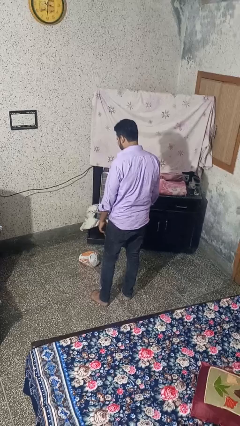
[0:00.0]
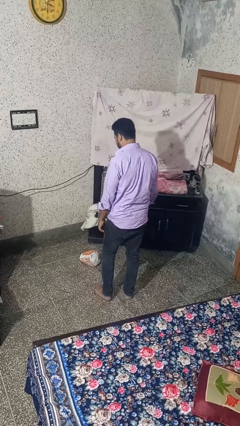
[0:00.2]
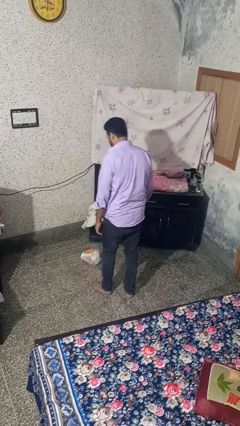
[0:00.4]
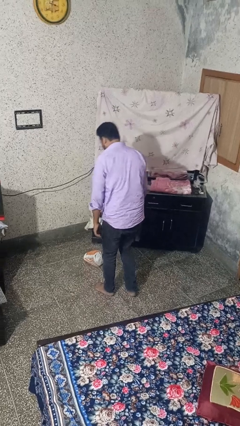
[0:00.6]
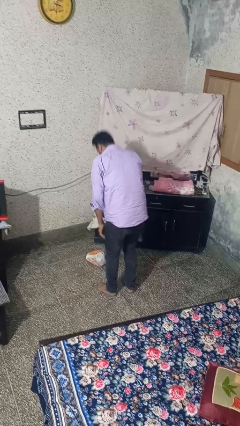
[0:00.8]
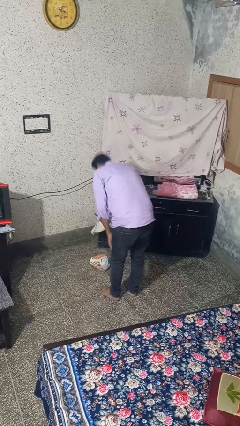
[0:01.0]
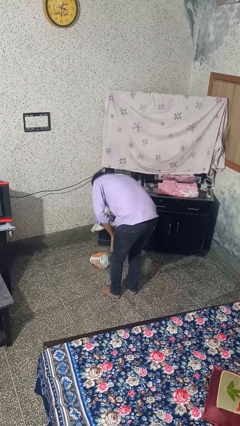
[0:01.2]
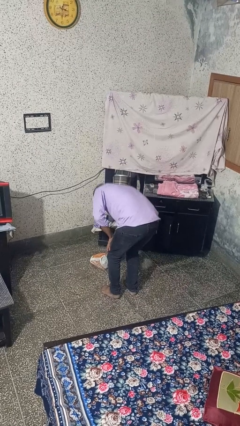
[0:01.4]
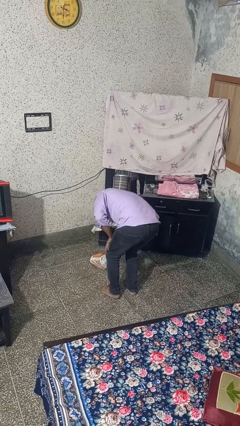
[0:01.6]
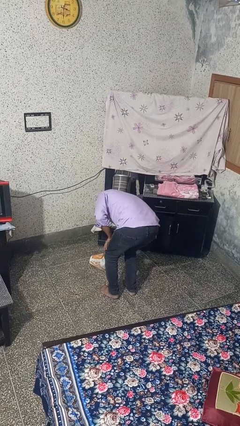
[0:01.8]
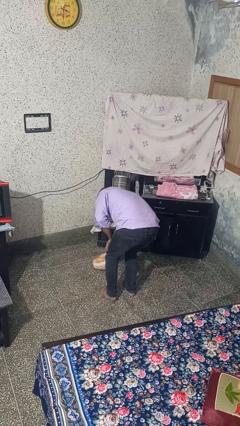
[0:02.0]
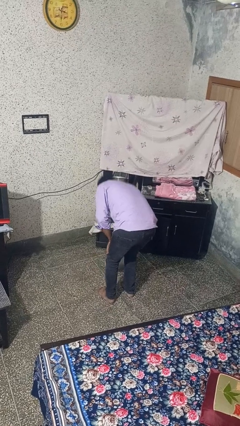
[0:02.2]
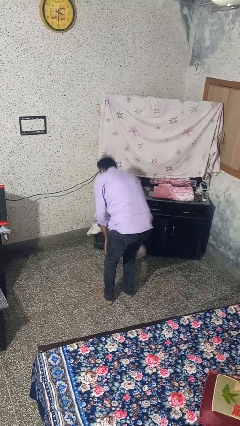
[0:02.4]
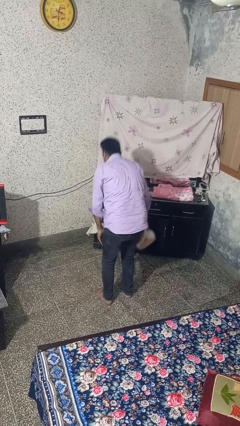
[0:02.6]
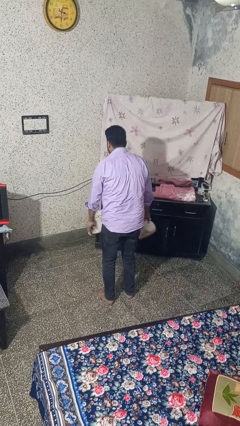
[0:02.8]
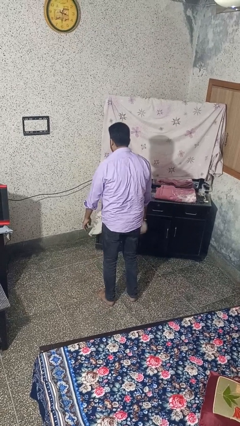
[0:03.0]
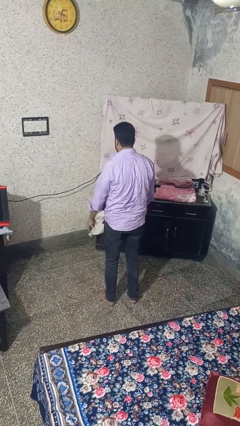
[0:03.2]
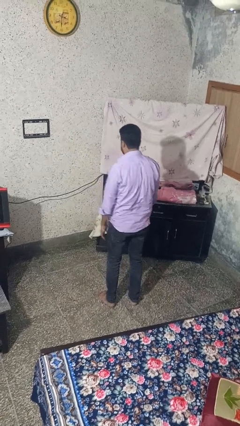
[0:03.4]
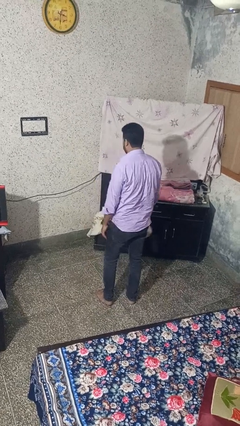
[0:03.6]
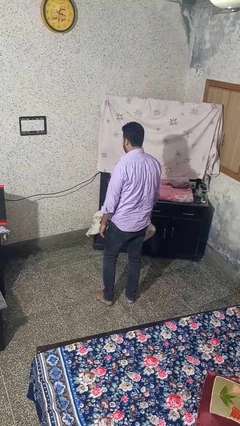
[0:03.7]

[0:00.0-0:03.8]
person picks up object from floor

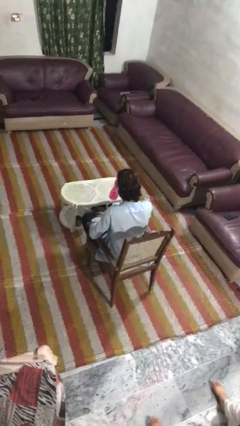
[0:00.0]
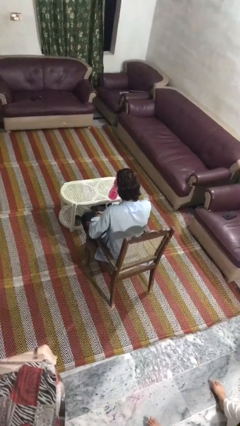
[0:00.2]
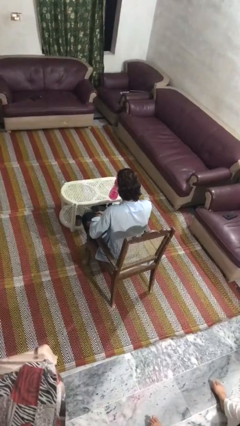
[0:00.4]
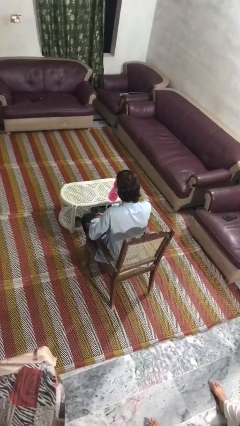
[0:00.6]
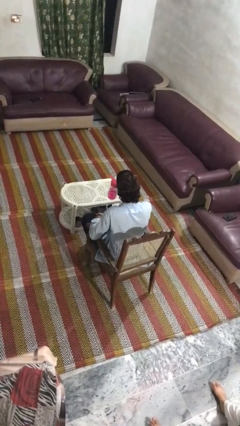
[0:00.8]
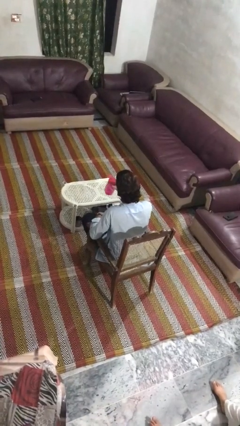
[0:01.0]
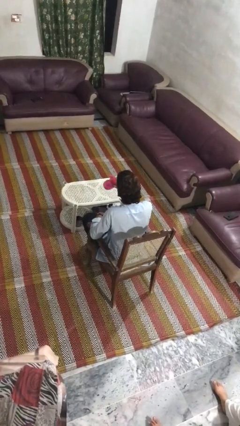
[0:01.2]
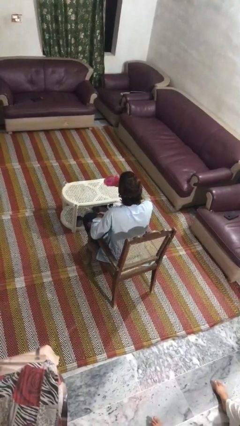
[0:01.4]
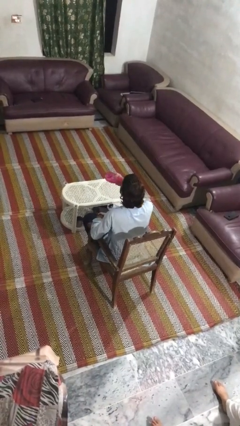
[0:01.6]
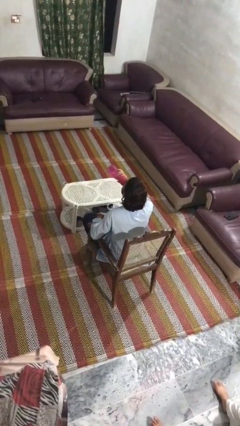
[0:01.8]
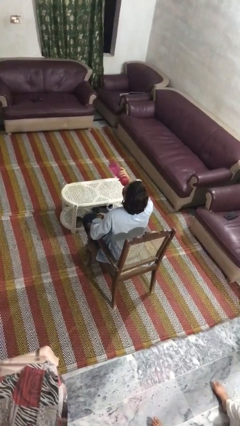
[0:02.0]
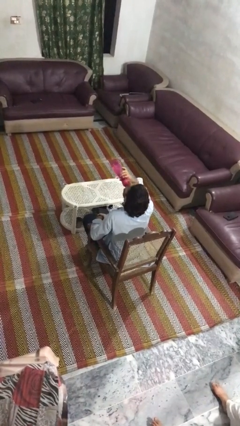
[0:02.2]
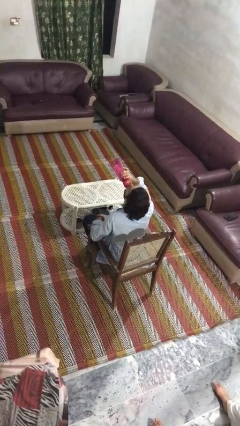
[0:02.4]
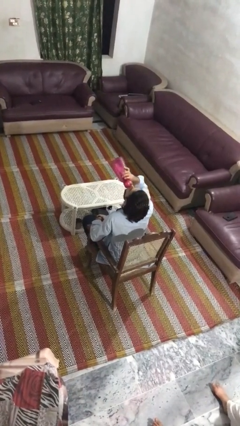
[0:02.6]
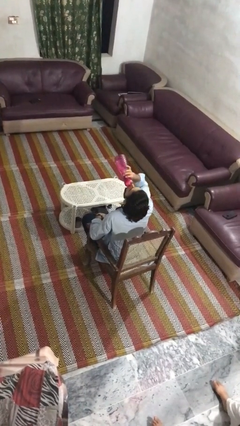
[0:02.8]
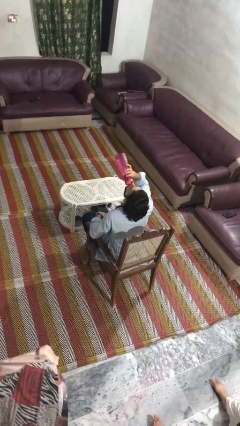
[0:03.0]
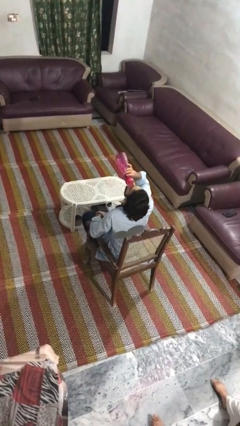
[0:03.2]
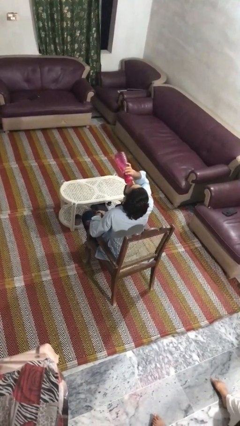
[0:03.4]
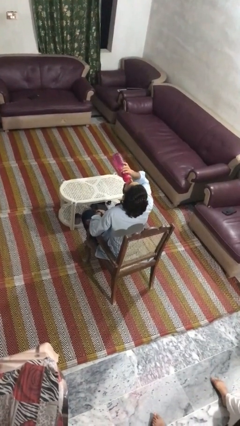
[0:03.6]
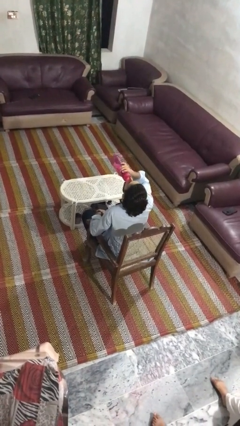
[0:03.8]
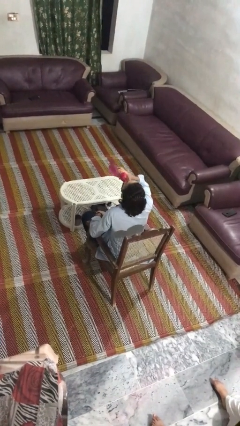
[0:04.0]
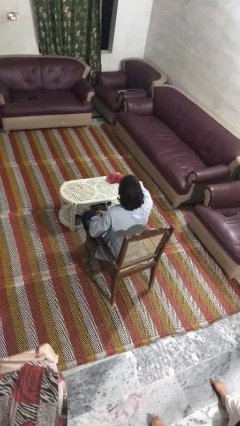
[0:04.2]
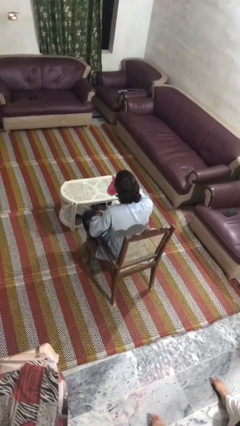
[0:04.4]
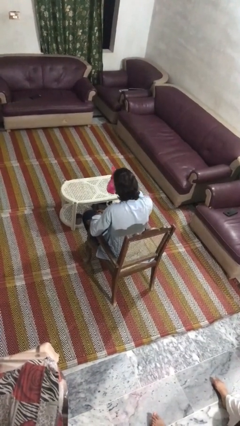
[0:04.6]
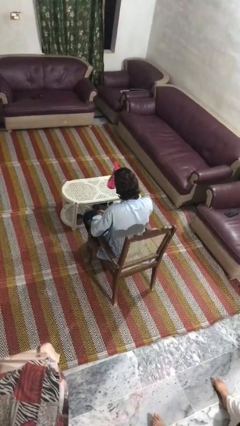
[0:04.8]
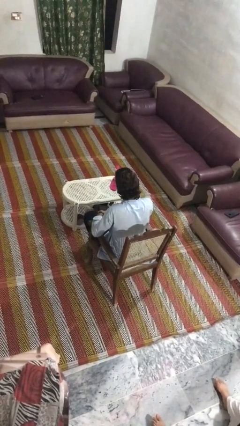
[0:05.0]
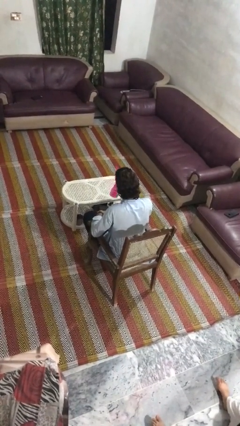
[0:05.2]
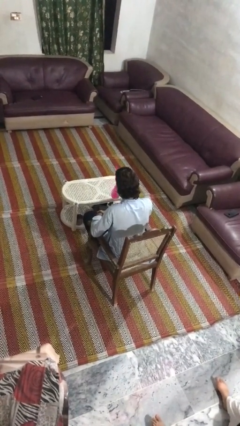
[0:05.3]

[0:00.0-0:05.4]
person drinks from bottle

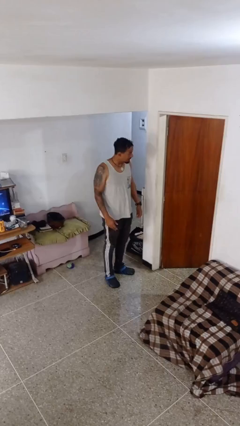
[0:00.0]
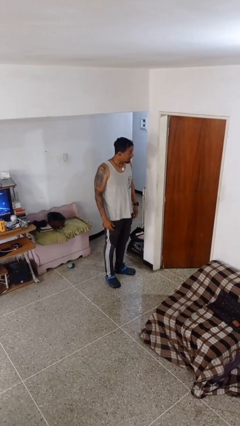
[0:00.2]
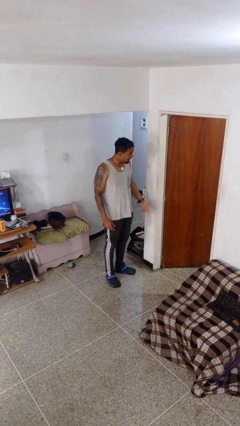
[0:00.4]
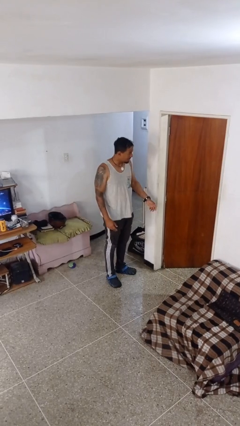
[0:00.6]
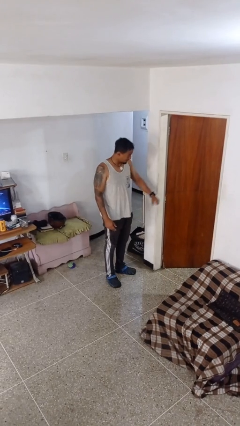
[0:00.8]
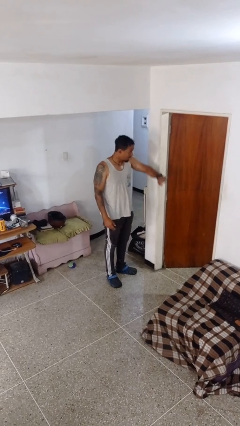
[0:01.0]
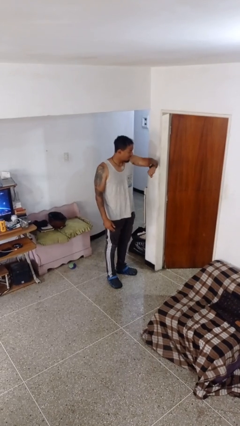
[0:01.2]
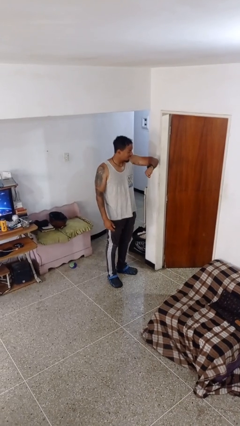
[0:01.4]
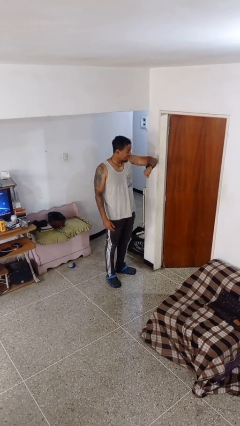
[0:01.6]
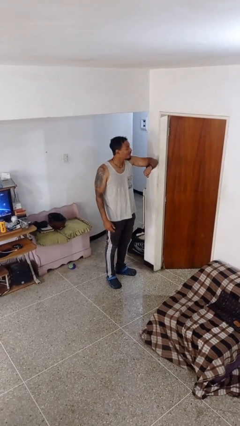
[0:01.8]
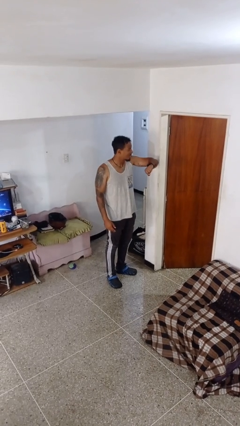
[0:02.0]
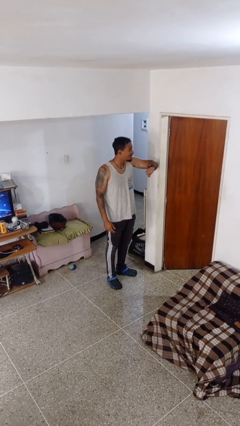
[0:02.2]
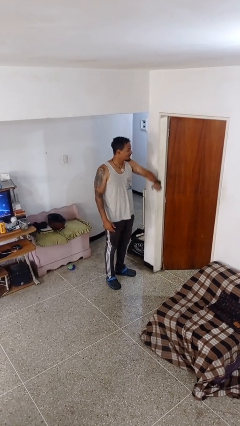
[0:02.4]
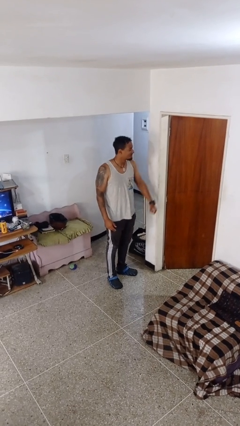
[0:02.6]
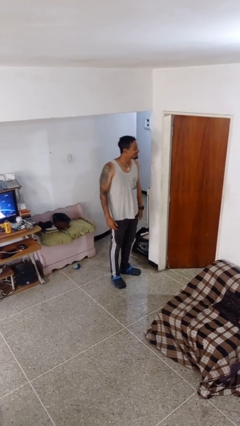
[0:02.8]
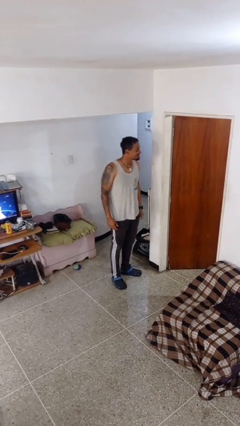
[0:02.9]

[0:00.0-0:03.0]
person looks at wristwatch

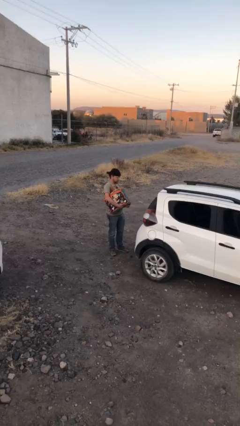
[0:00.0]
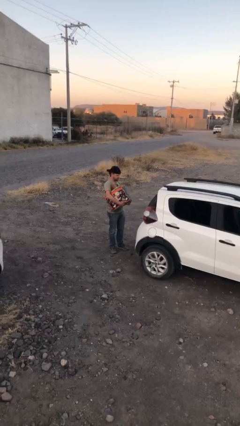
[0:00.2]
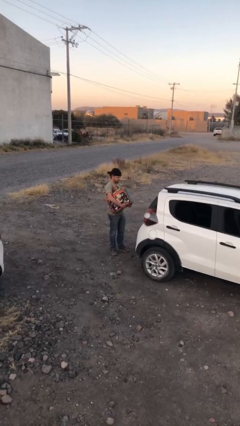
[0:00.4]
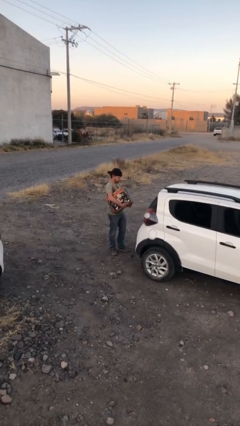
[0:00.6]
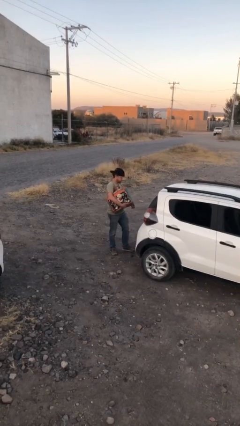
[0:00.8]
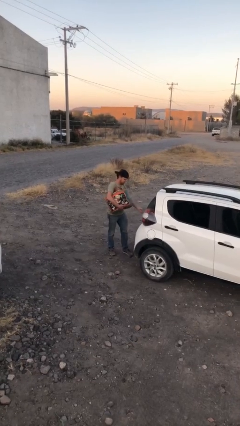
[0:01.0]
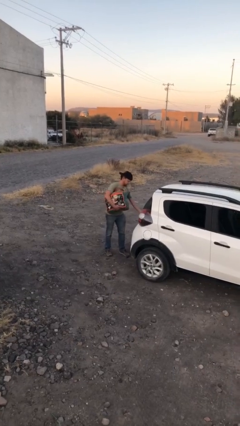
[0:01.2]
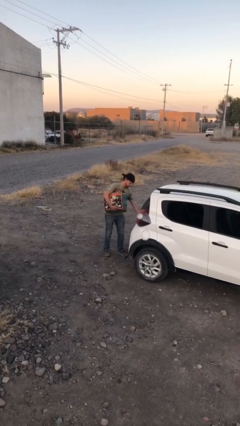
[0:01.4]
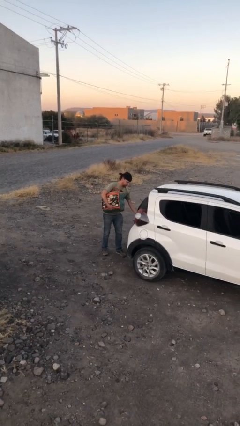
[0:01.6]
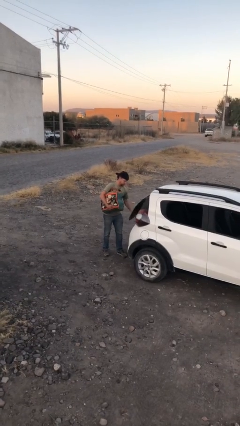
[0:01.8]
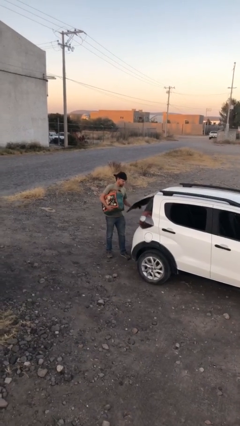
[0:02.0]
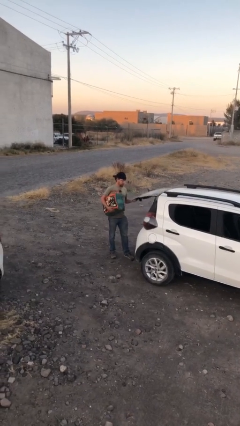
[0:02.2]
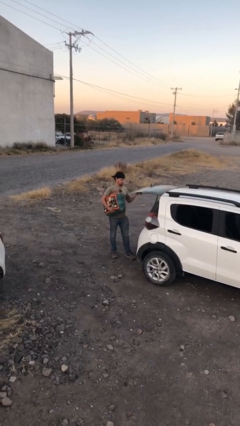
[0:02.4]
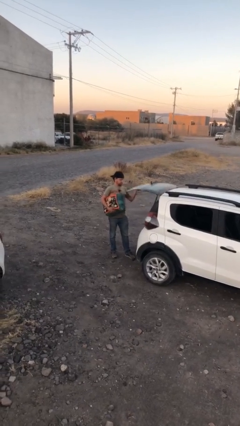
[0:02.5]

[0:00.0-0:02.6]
person opens car trunk

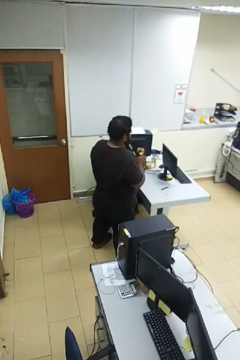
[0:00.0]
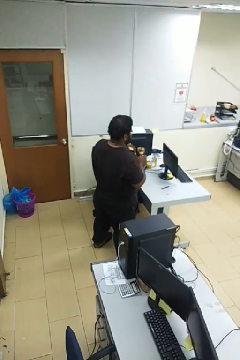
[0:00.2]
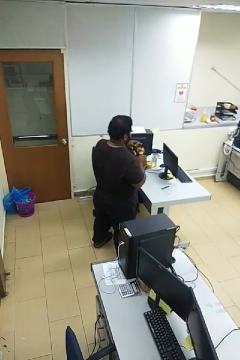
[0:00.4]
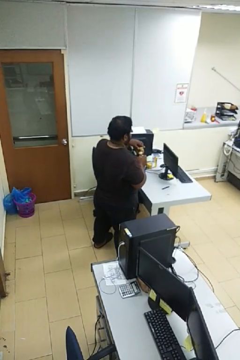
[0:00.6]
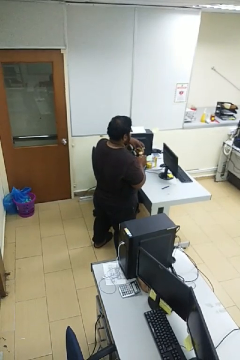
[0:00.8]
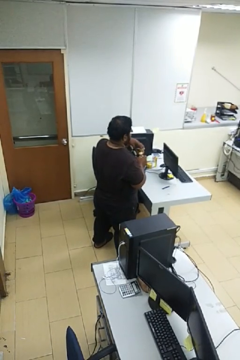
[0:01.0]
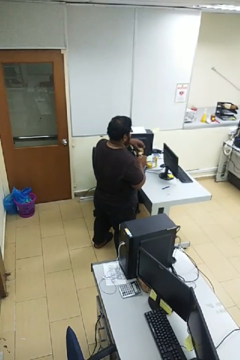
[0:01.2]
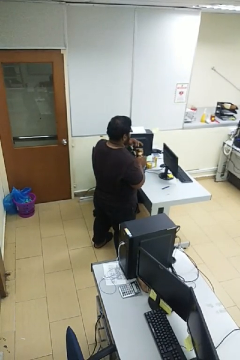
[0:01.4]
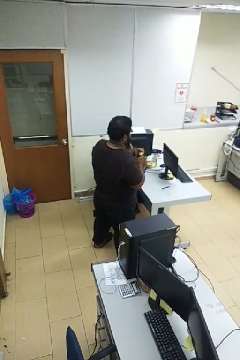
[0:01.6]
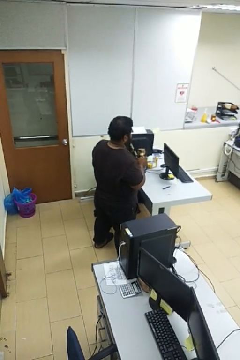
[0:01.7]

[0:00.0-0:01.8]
person closes jar

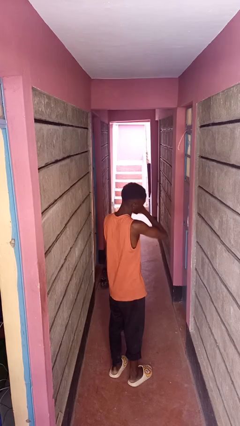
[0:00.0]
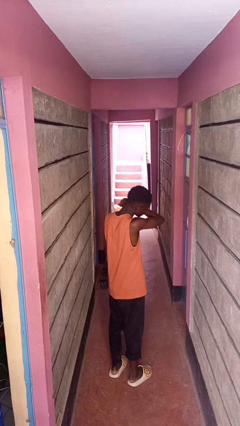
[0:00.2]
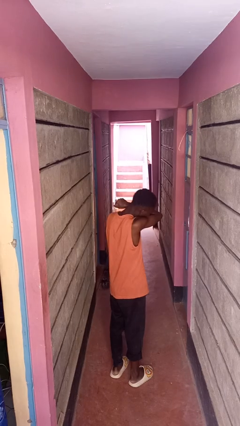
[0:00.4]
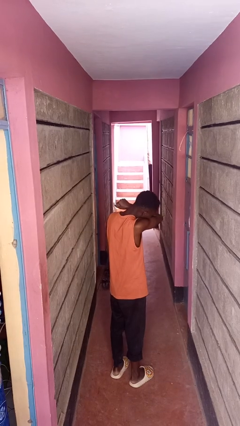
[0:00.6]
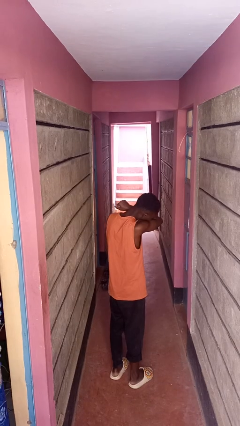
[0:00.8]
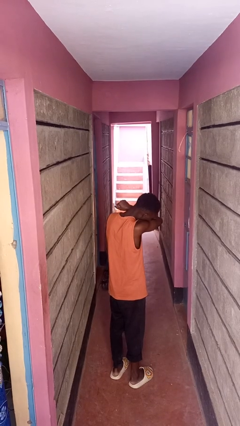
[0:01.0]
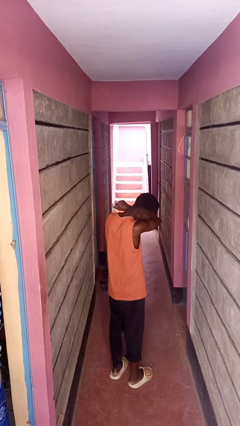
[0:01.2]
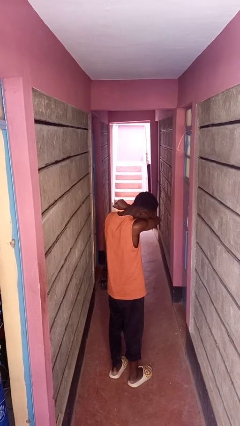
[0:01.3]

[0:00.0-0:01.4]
person sneezes into arm
